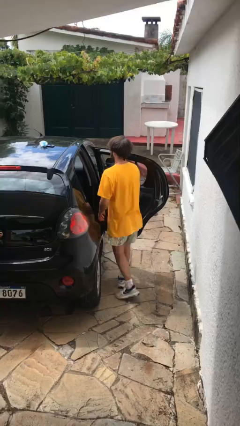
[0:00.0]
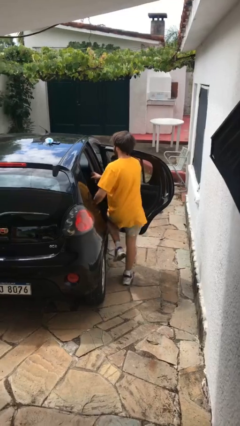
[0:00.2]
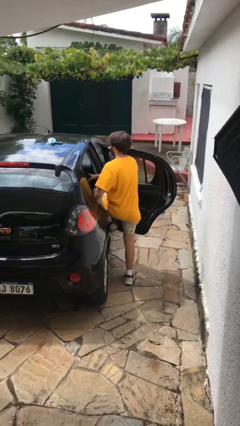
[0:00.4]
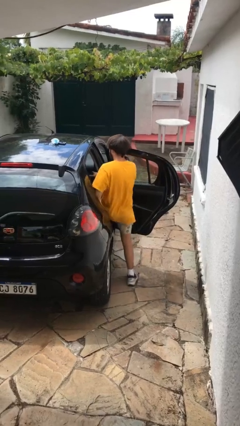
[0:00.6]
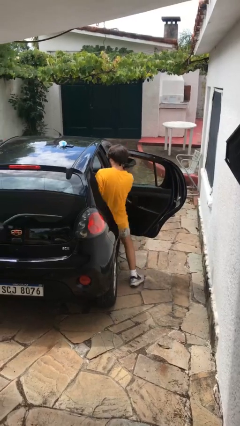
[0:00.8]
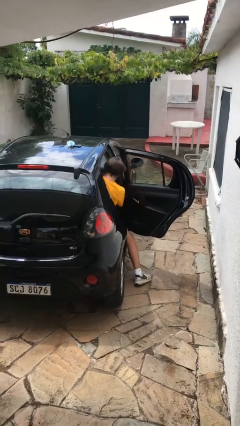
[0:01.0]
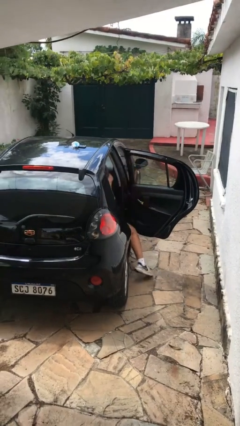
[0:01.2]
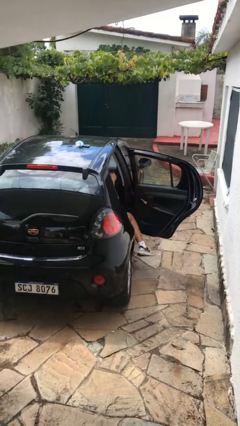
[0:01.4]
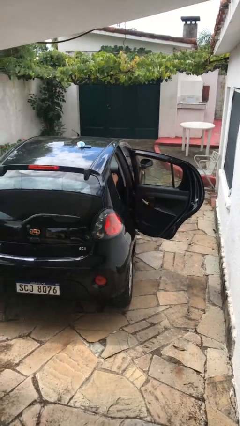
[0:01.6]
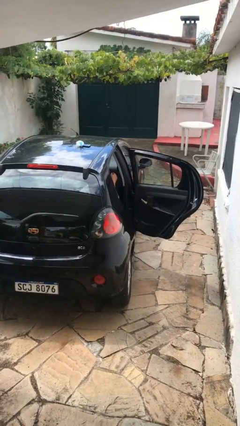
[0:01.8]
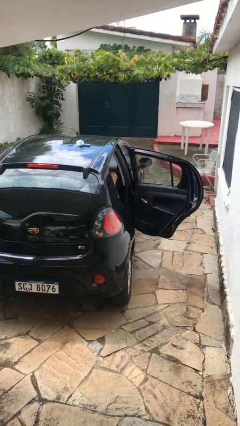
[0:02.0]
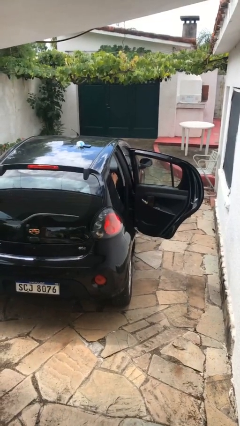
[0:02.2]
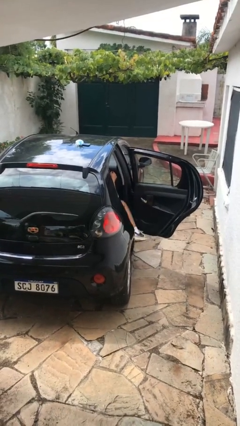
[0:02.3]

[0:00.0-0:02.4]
person enters car

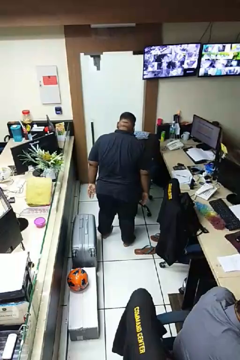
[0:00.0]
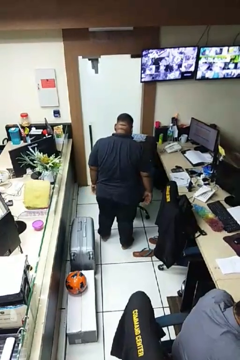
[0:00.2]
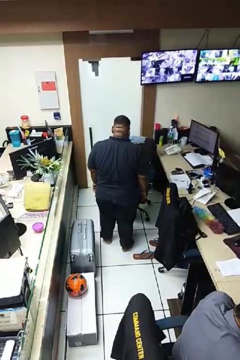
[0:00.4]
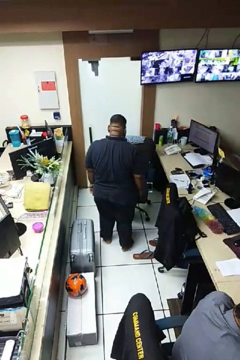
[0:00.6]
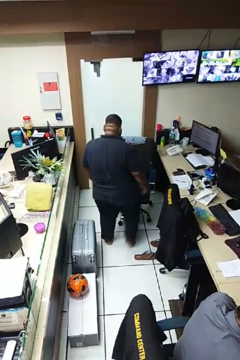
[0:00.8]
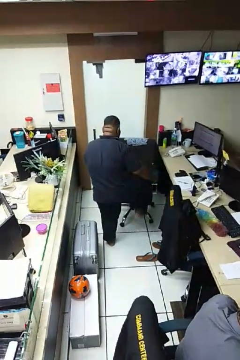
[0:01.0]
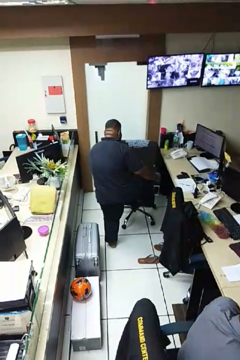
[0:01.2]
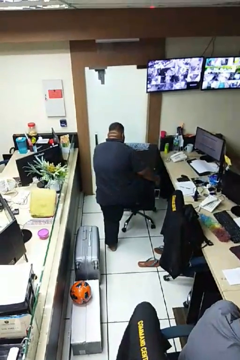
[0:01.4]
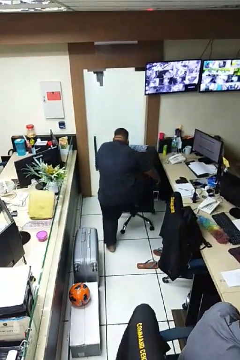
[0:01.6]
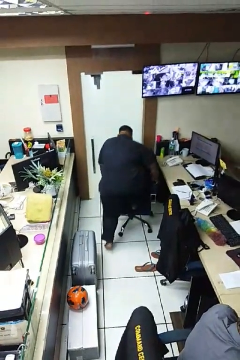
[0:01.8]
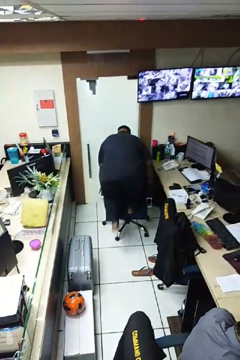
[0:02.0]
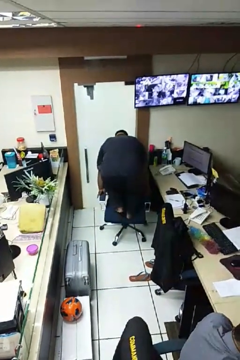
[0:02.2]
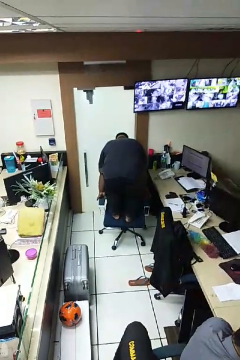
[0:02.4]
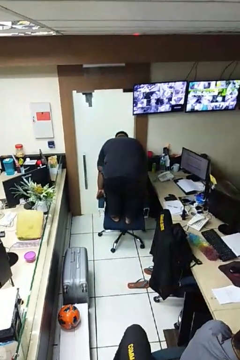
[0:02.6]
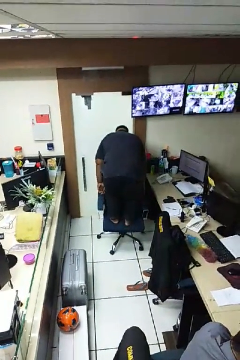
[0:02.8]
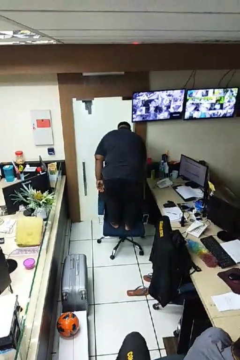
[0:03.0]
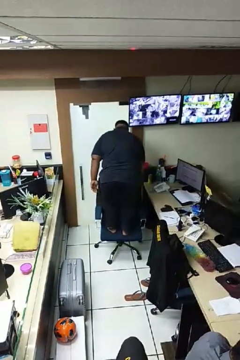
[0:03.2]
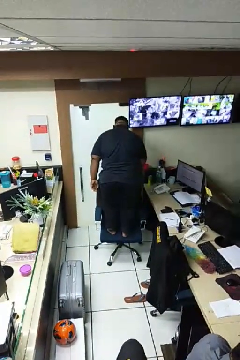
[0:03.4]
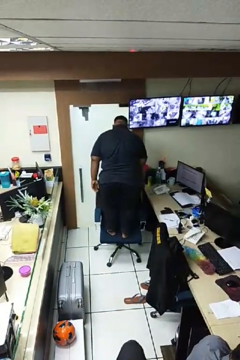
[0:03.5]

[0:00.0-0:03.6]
person climbs on chair

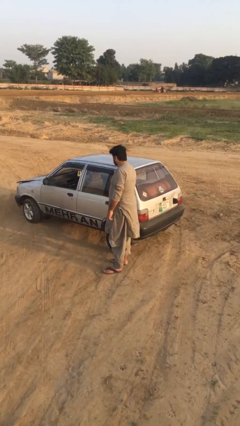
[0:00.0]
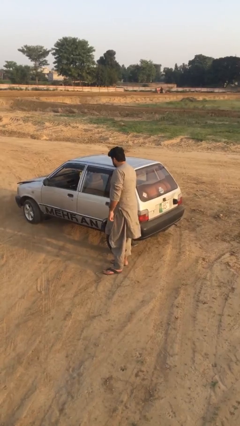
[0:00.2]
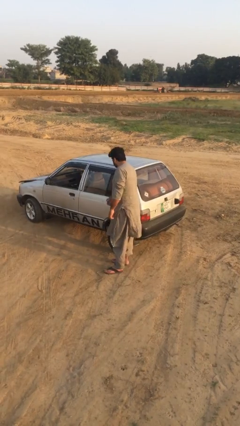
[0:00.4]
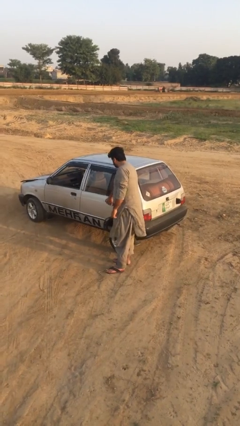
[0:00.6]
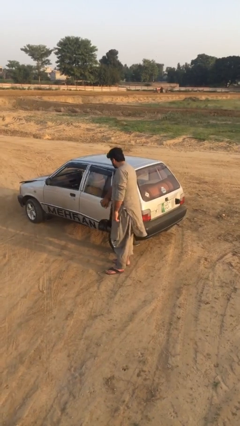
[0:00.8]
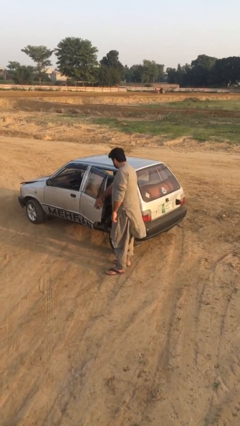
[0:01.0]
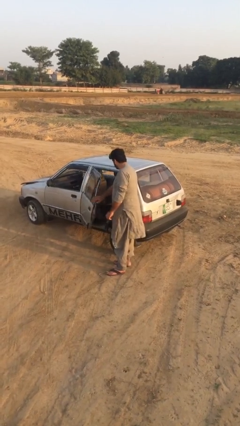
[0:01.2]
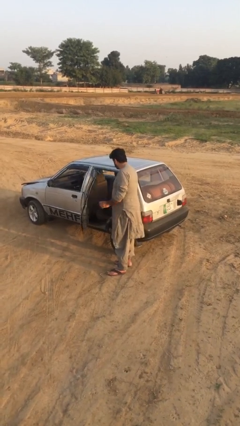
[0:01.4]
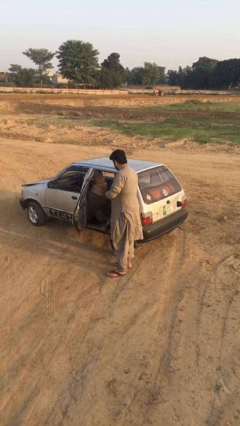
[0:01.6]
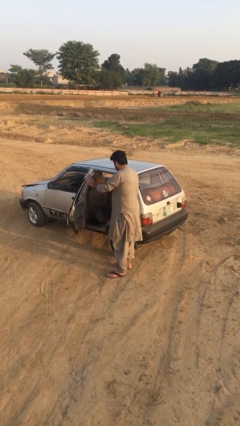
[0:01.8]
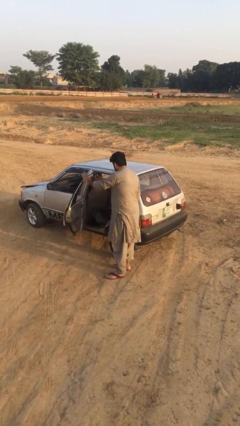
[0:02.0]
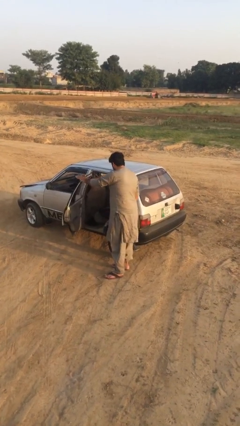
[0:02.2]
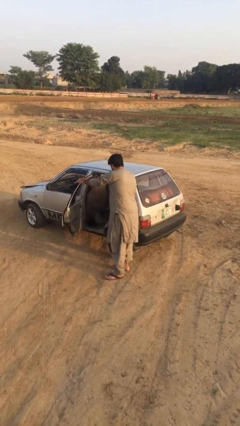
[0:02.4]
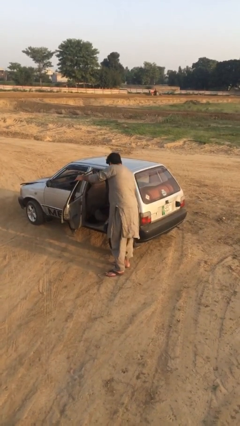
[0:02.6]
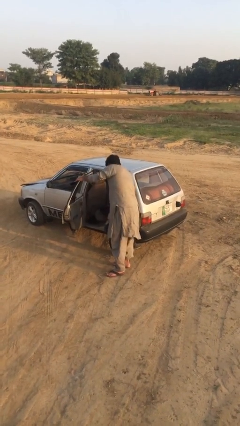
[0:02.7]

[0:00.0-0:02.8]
person opens car door

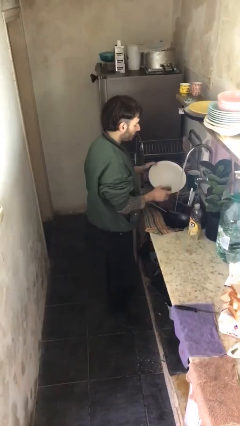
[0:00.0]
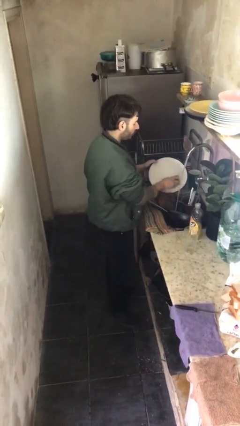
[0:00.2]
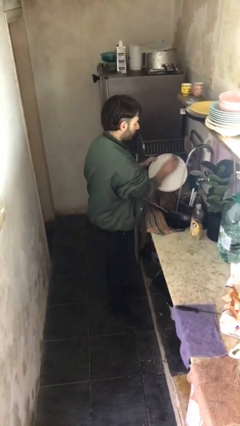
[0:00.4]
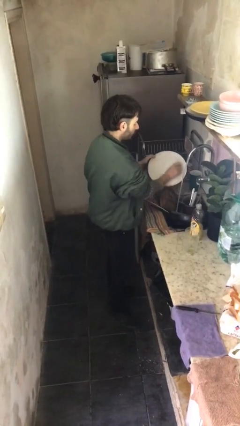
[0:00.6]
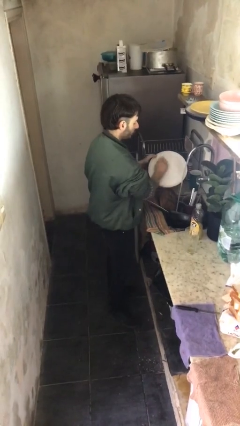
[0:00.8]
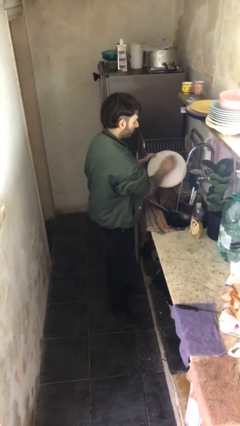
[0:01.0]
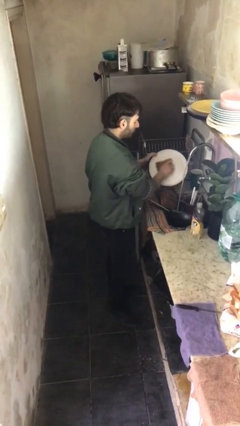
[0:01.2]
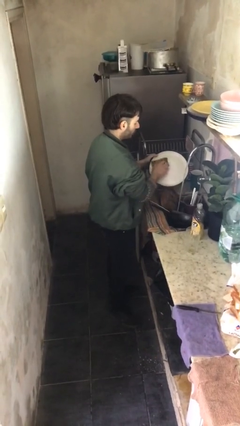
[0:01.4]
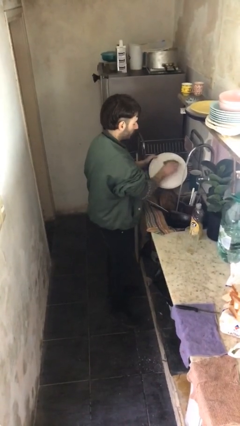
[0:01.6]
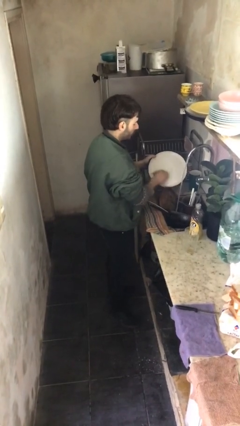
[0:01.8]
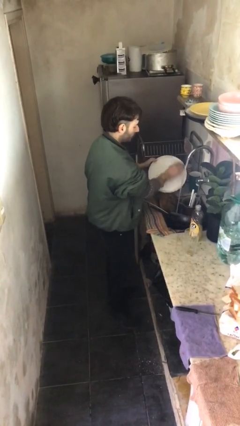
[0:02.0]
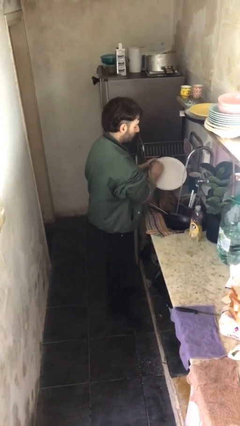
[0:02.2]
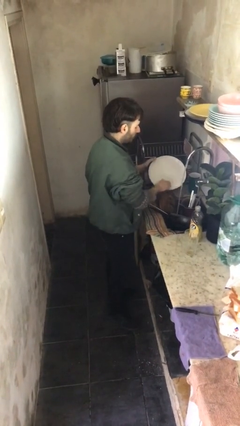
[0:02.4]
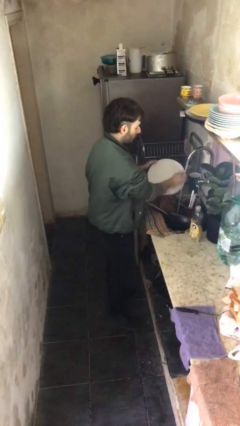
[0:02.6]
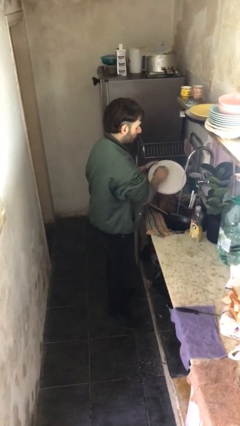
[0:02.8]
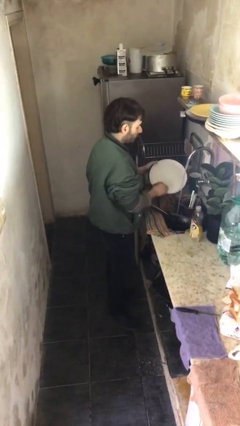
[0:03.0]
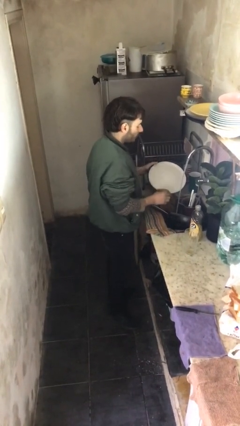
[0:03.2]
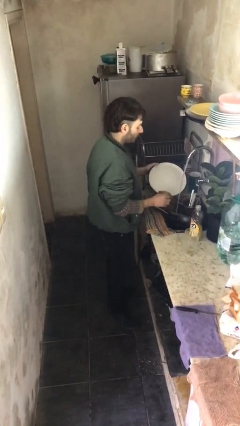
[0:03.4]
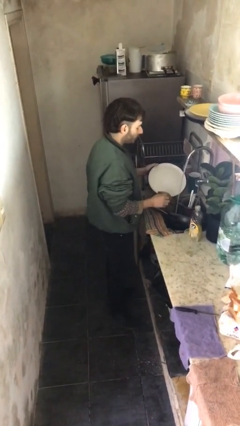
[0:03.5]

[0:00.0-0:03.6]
person washes dish

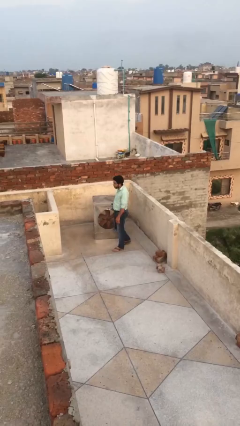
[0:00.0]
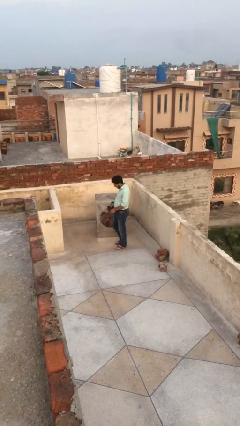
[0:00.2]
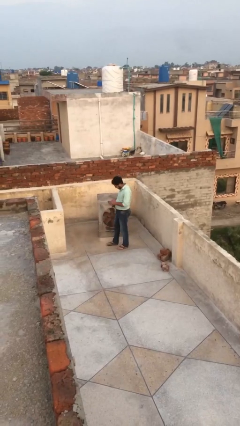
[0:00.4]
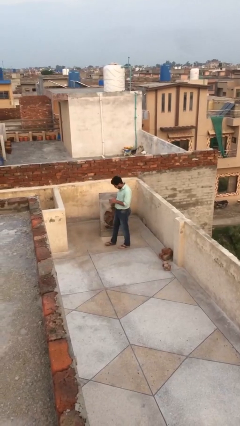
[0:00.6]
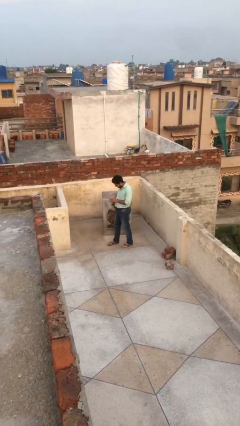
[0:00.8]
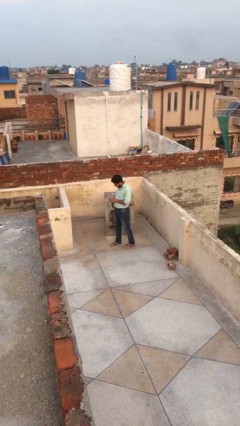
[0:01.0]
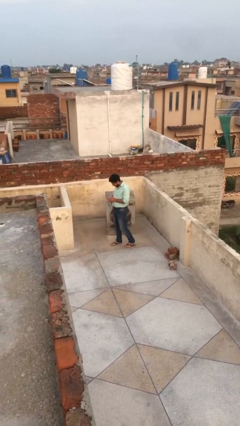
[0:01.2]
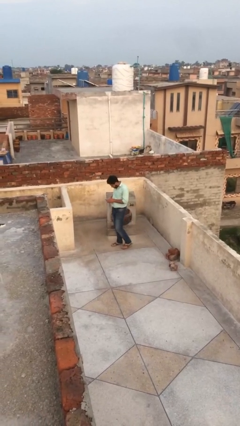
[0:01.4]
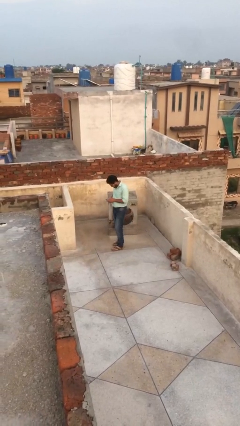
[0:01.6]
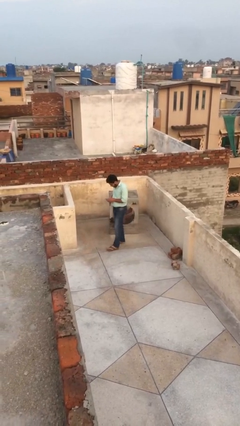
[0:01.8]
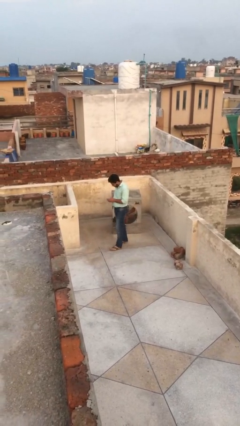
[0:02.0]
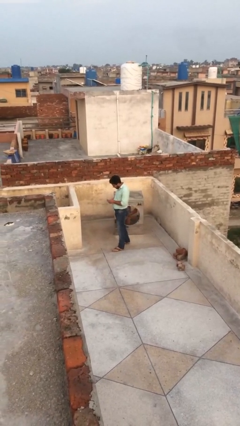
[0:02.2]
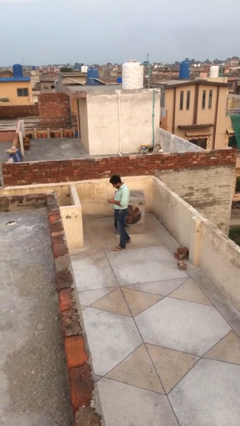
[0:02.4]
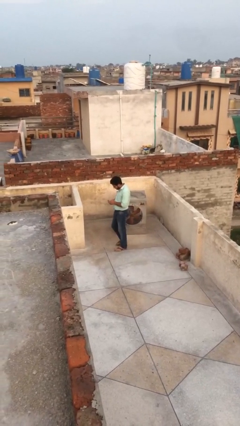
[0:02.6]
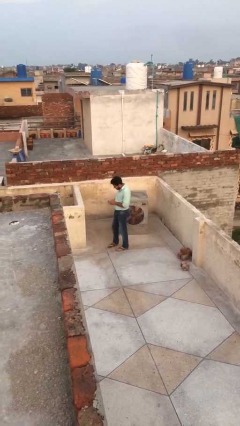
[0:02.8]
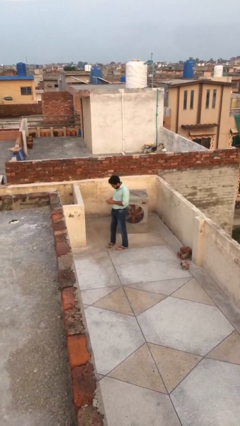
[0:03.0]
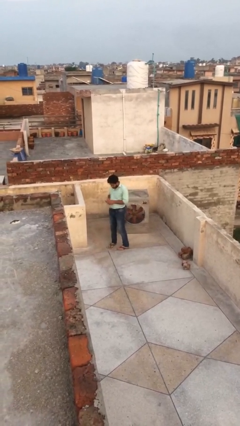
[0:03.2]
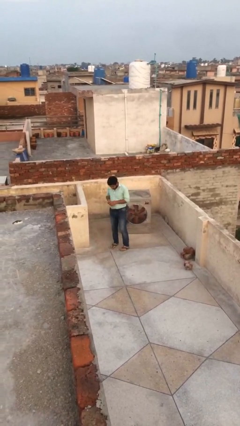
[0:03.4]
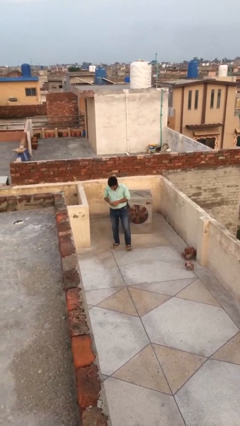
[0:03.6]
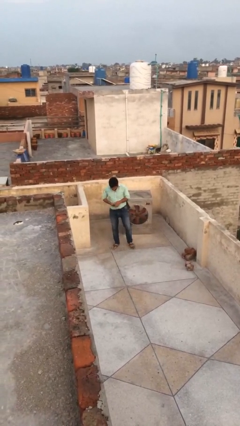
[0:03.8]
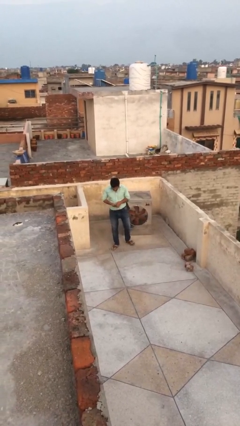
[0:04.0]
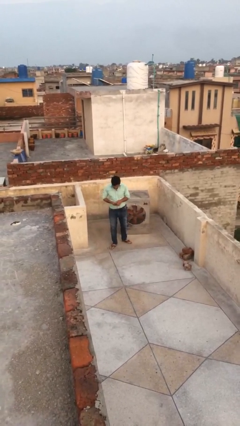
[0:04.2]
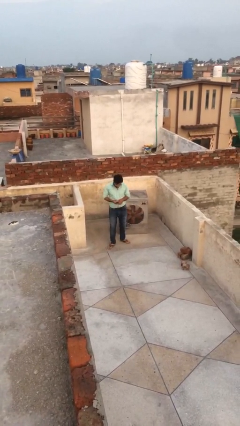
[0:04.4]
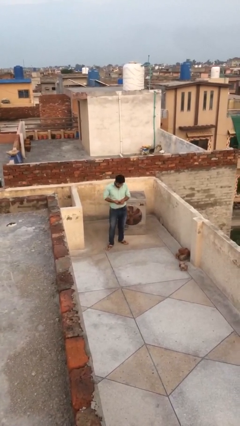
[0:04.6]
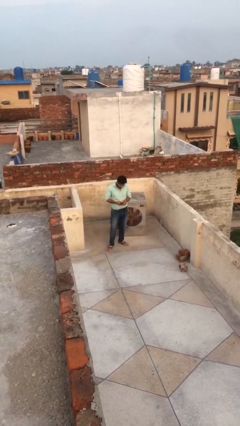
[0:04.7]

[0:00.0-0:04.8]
person texts on phone

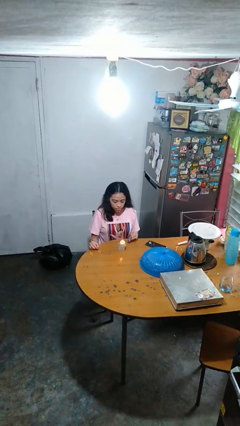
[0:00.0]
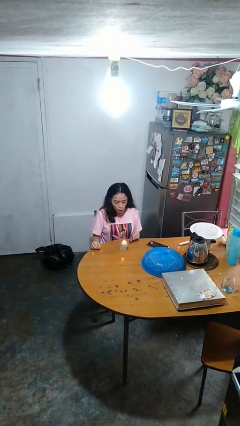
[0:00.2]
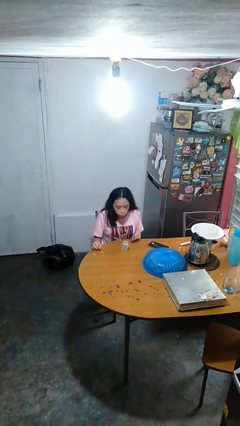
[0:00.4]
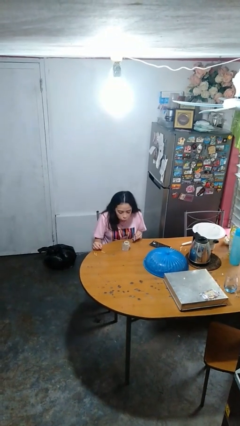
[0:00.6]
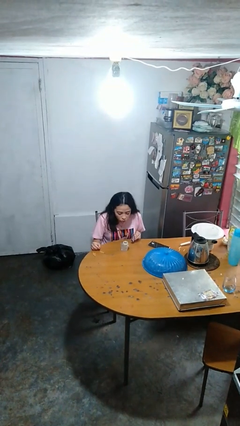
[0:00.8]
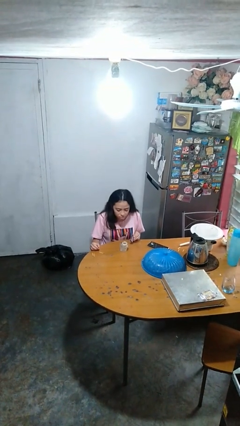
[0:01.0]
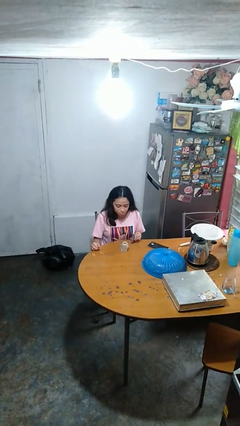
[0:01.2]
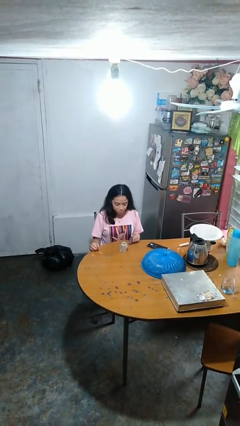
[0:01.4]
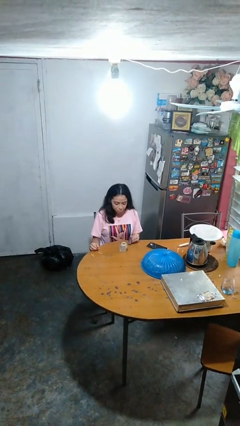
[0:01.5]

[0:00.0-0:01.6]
person extinguishes candle
